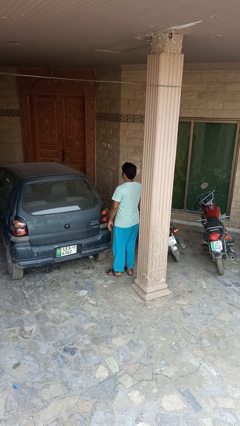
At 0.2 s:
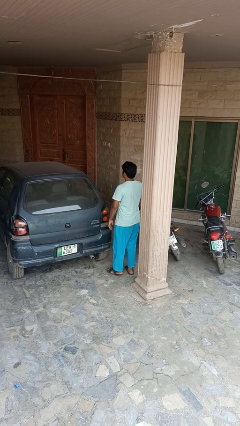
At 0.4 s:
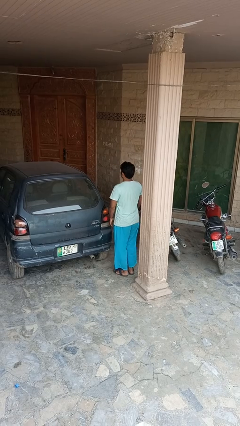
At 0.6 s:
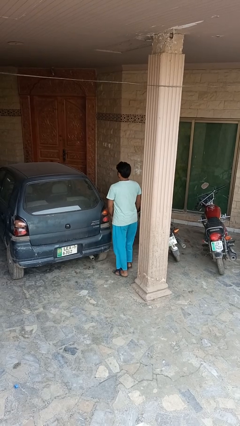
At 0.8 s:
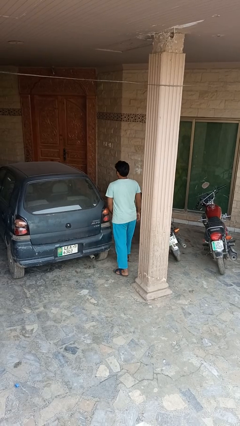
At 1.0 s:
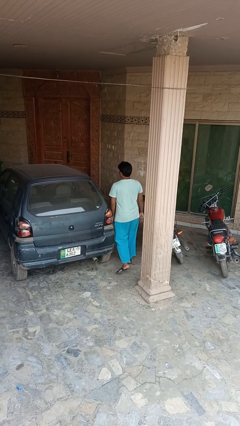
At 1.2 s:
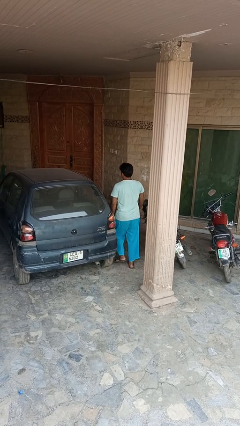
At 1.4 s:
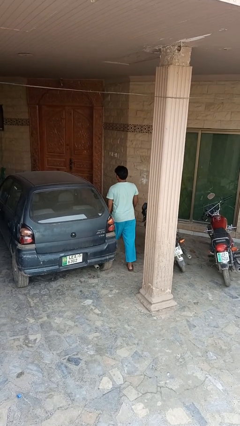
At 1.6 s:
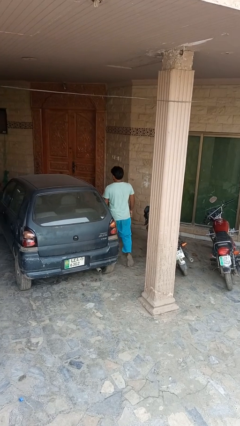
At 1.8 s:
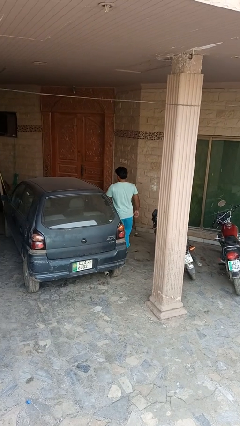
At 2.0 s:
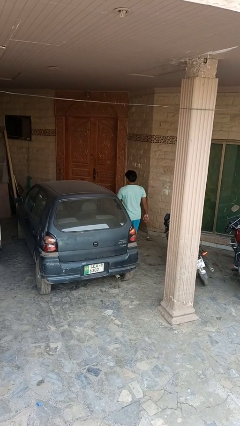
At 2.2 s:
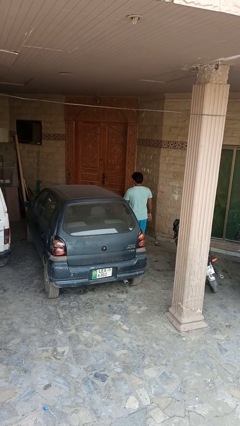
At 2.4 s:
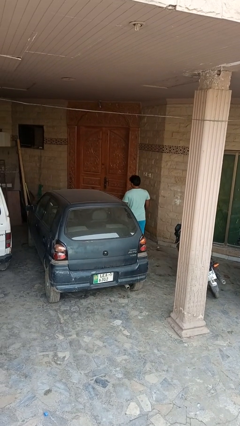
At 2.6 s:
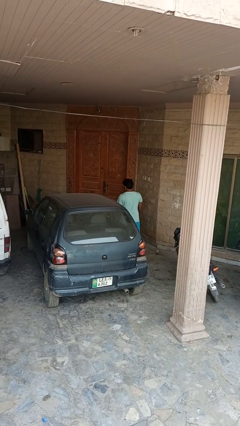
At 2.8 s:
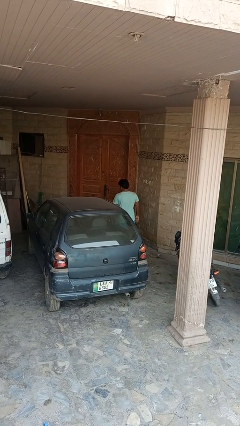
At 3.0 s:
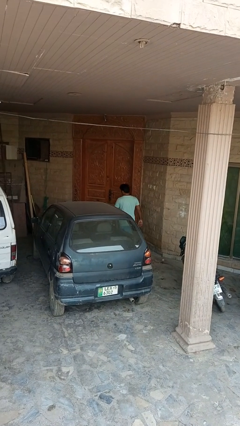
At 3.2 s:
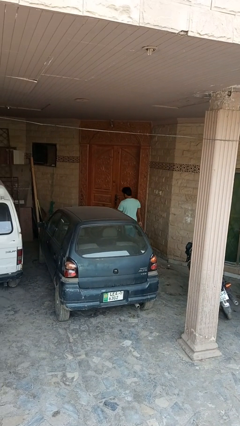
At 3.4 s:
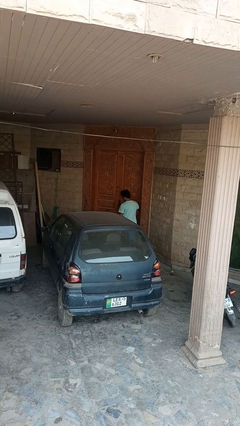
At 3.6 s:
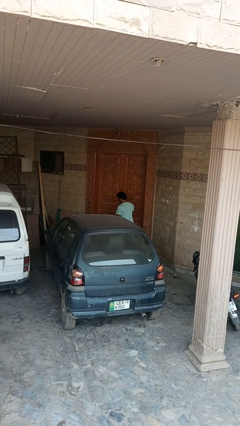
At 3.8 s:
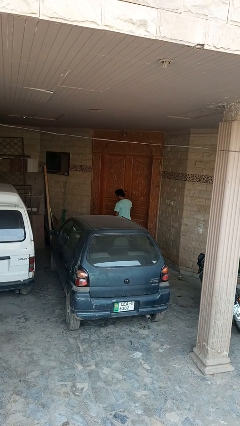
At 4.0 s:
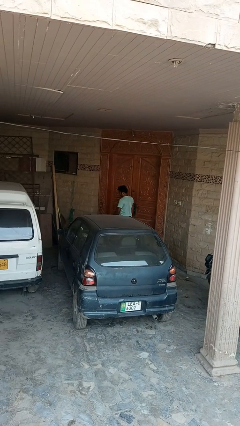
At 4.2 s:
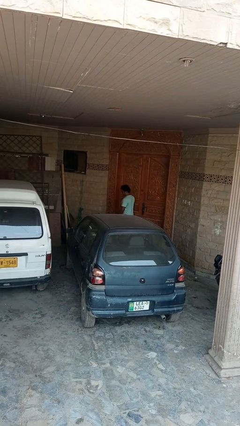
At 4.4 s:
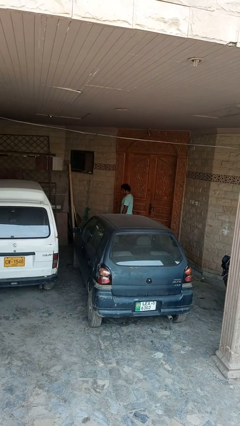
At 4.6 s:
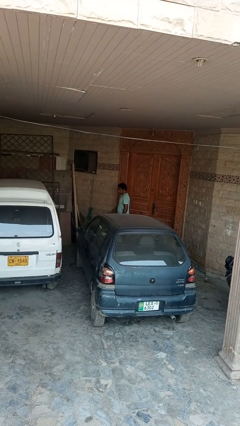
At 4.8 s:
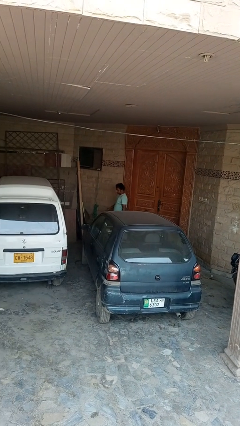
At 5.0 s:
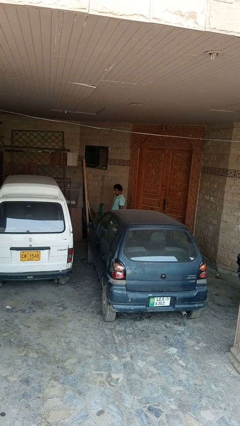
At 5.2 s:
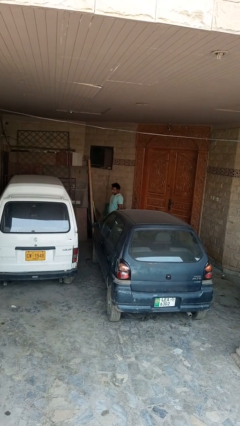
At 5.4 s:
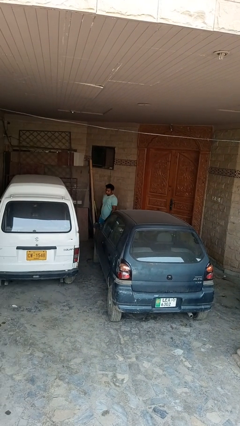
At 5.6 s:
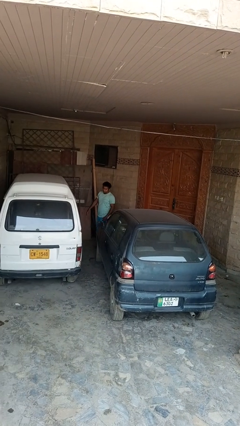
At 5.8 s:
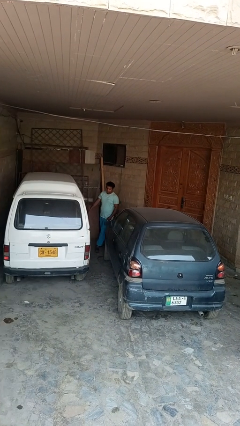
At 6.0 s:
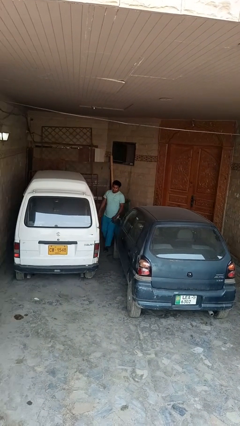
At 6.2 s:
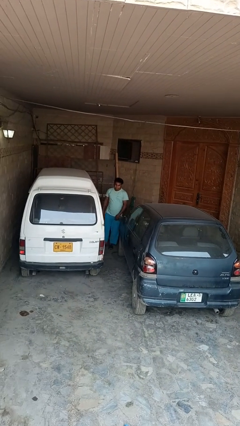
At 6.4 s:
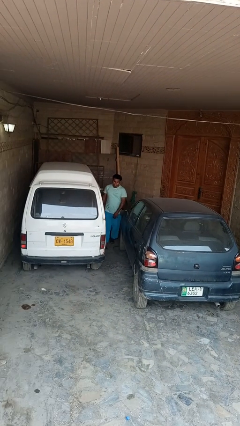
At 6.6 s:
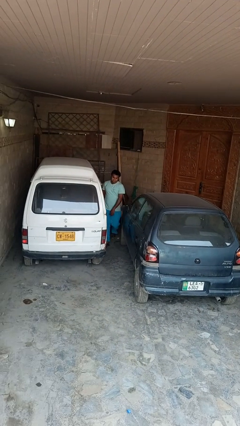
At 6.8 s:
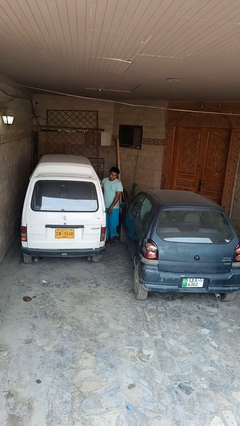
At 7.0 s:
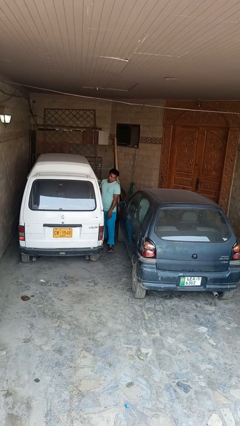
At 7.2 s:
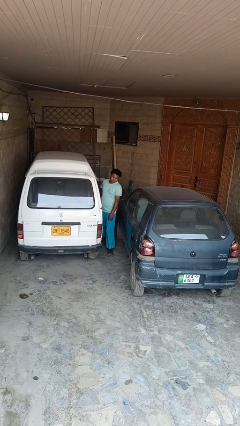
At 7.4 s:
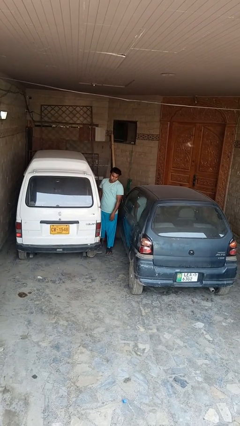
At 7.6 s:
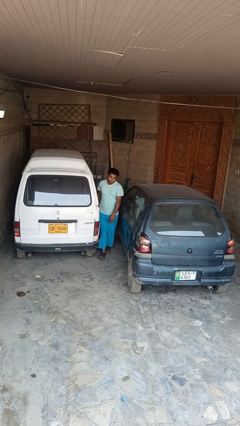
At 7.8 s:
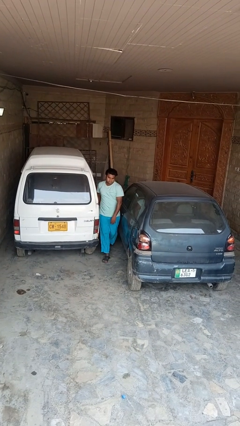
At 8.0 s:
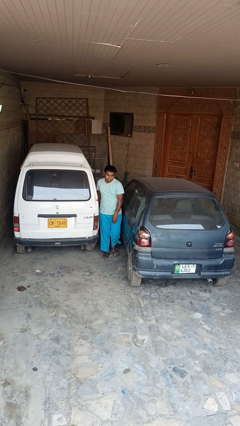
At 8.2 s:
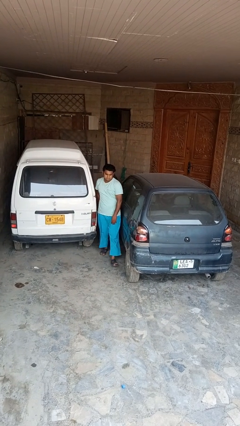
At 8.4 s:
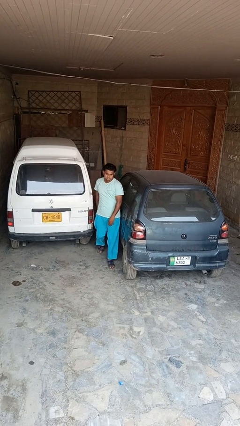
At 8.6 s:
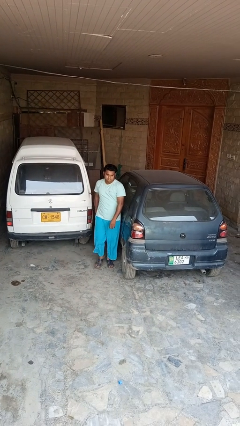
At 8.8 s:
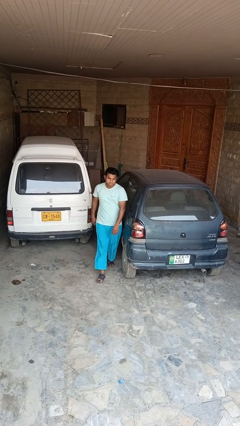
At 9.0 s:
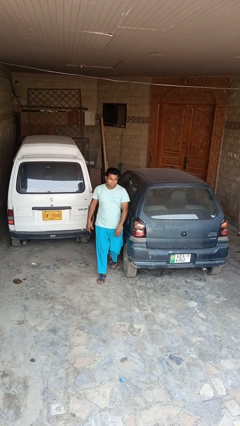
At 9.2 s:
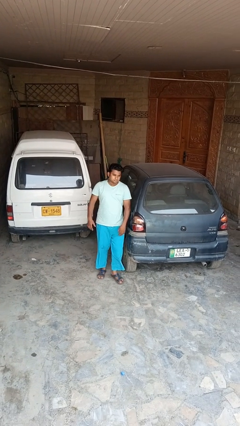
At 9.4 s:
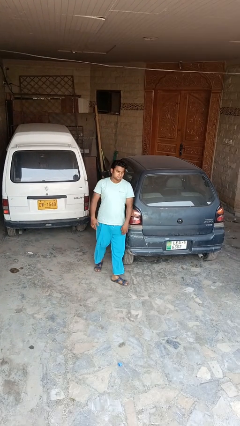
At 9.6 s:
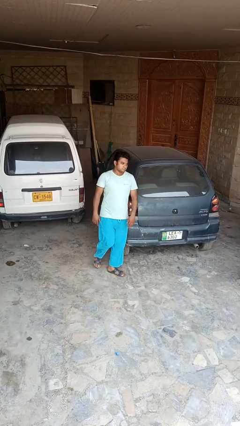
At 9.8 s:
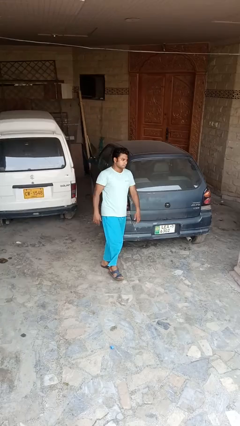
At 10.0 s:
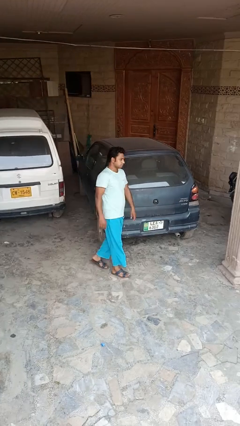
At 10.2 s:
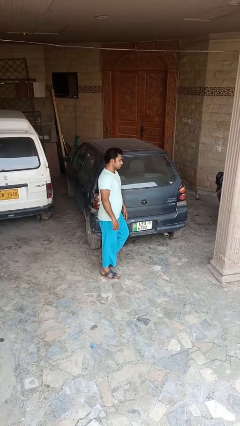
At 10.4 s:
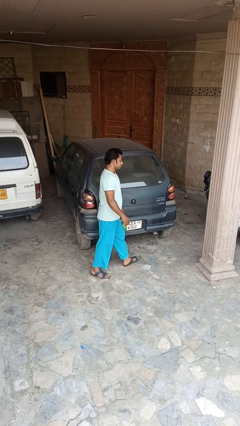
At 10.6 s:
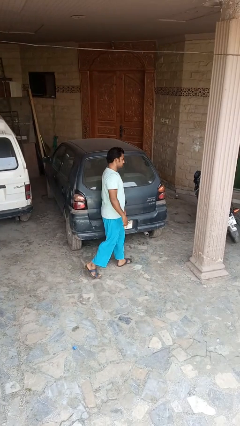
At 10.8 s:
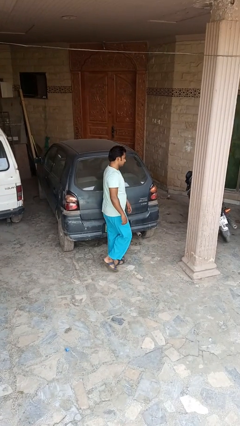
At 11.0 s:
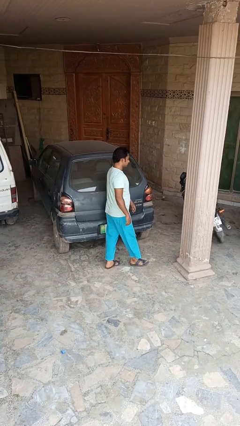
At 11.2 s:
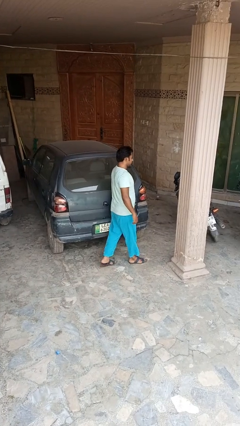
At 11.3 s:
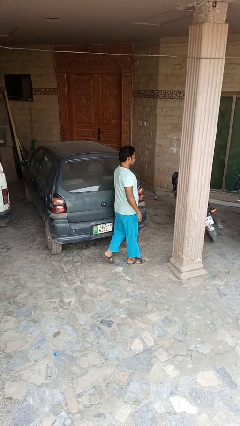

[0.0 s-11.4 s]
person walks around car

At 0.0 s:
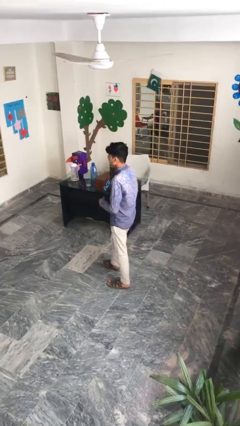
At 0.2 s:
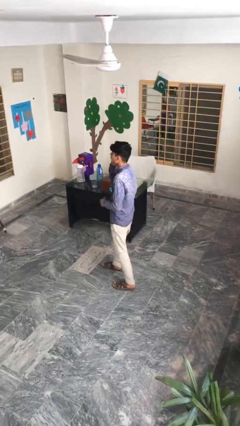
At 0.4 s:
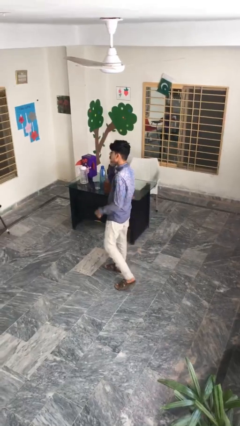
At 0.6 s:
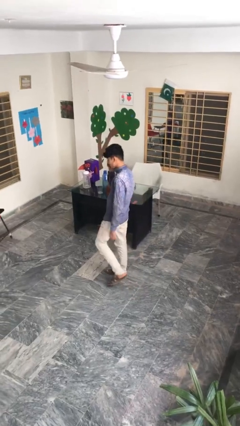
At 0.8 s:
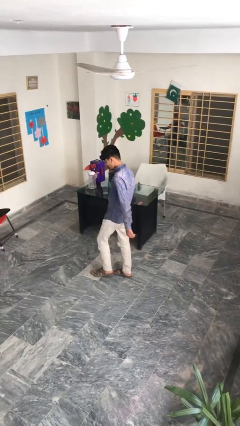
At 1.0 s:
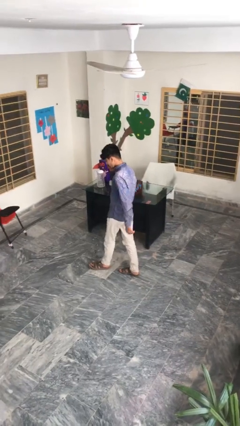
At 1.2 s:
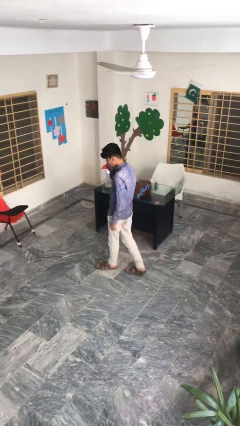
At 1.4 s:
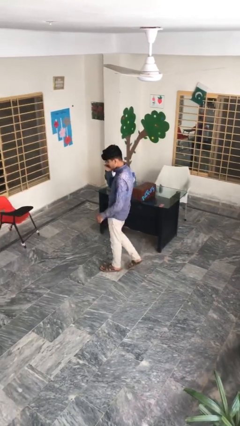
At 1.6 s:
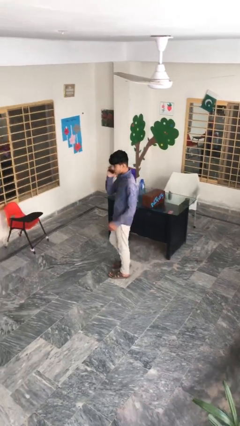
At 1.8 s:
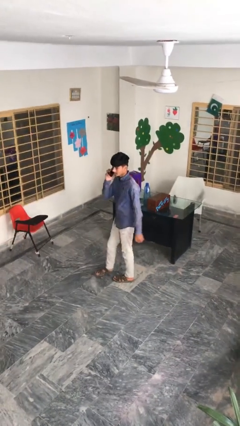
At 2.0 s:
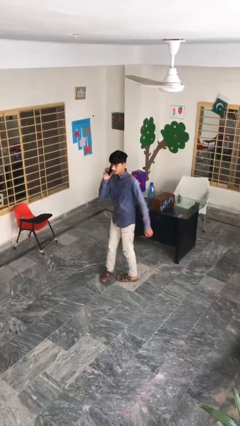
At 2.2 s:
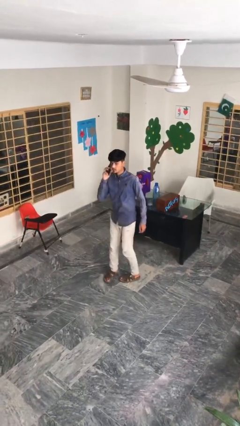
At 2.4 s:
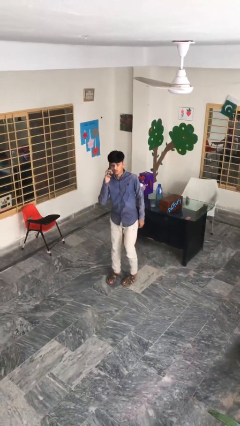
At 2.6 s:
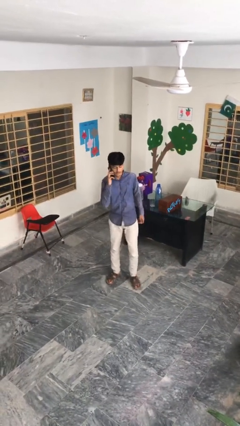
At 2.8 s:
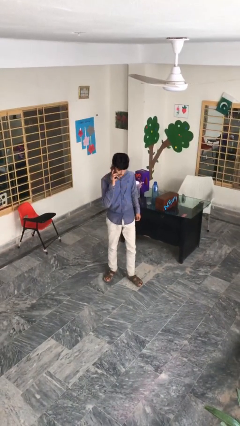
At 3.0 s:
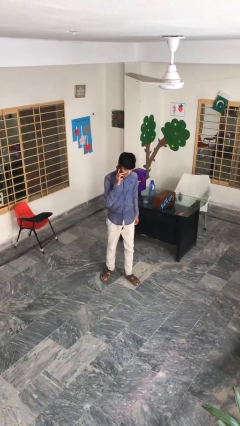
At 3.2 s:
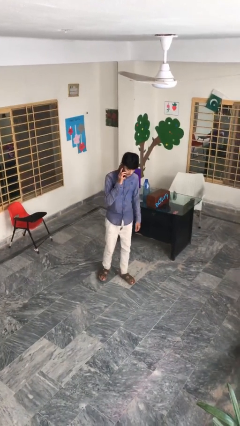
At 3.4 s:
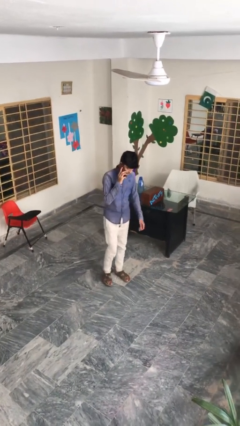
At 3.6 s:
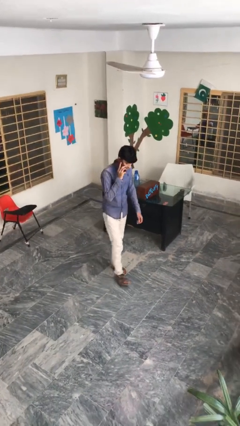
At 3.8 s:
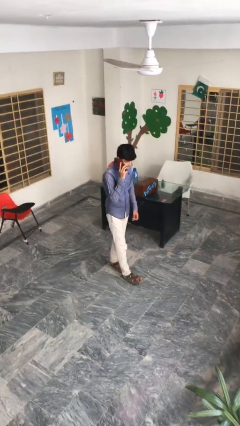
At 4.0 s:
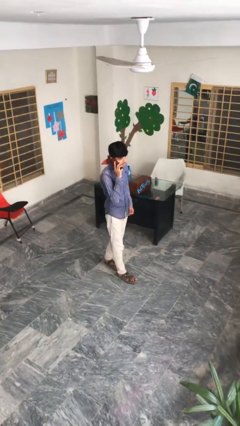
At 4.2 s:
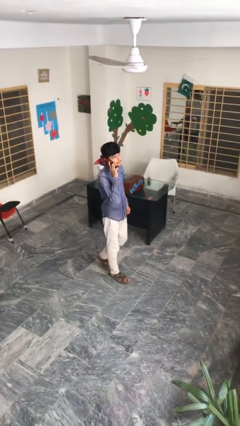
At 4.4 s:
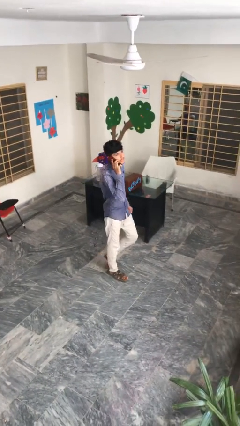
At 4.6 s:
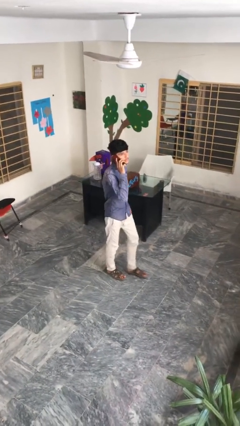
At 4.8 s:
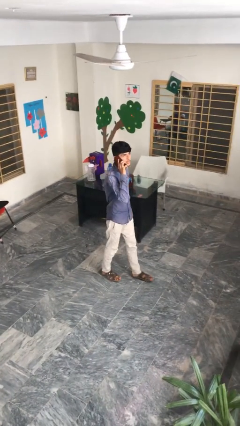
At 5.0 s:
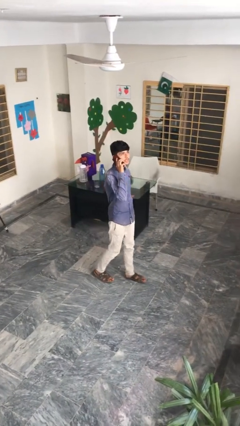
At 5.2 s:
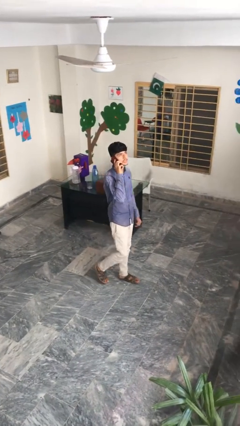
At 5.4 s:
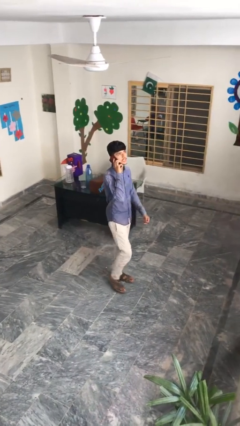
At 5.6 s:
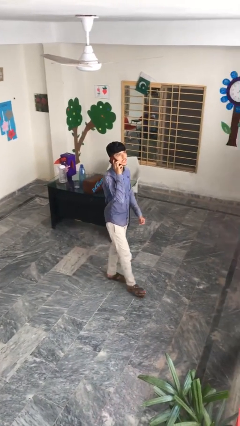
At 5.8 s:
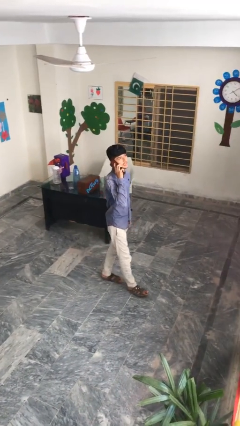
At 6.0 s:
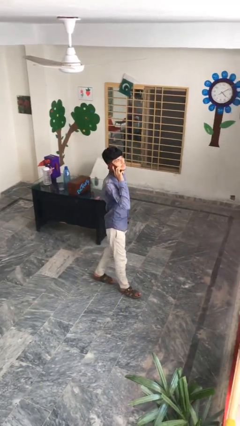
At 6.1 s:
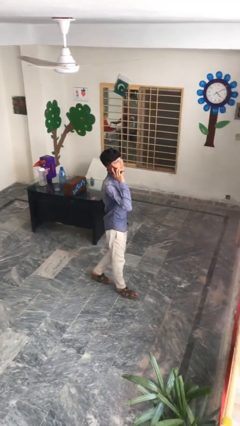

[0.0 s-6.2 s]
person talks on phone
